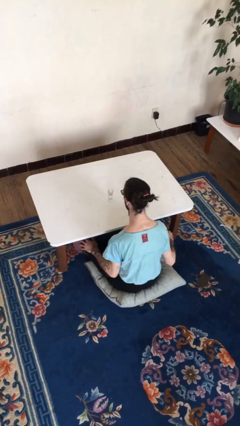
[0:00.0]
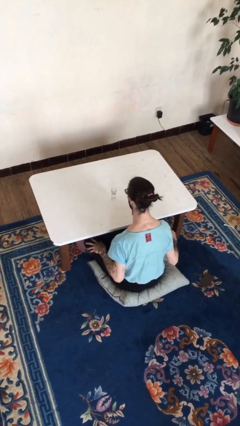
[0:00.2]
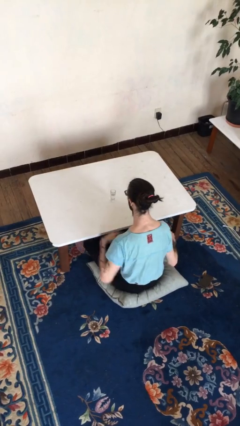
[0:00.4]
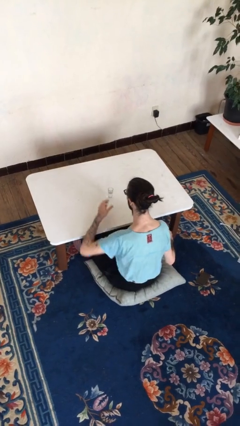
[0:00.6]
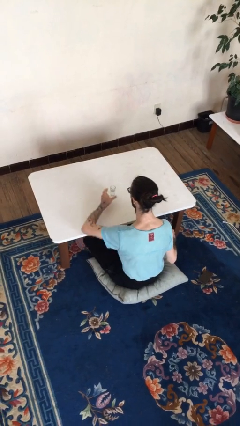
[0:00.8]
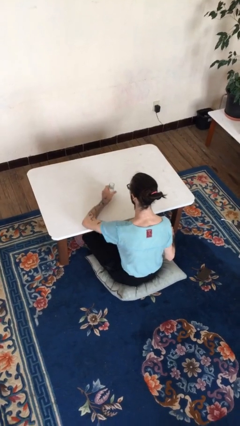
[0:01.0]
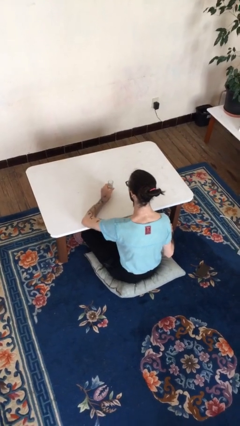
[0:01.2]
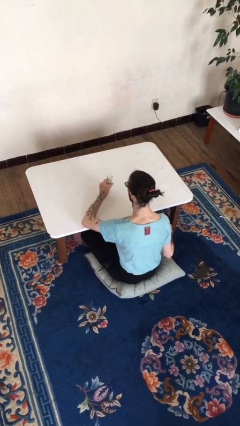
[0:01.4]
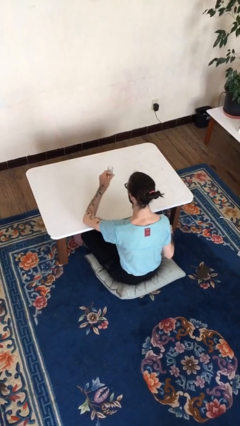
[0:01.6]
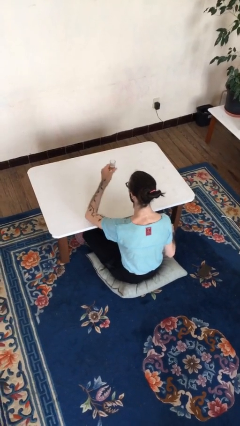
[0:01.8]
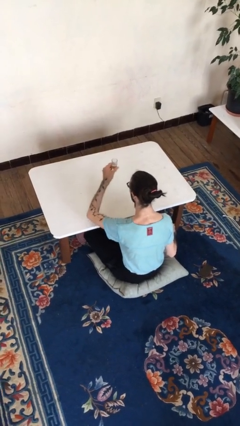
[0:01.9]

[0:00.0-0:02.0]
person picks up object from table

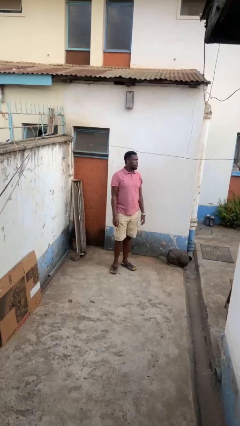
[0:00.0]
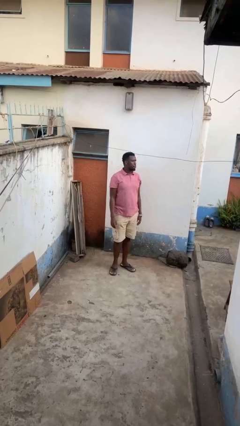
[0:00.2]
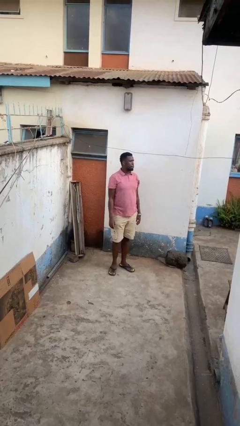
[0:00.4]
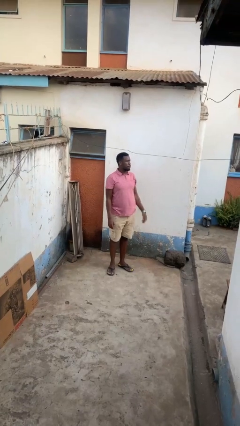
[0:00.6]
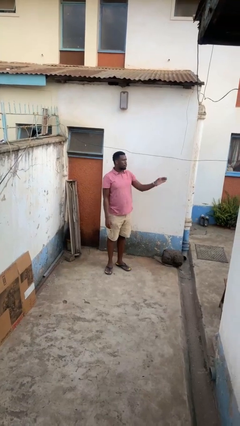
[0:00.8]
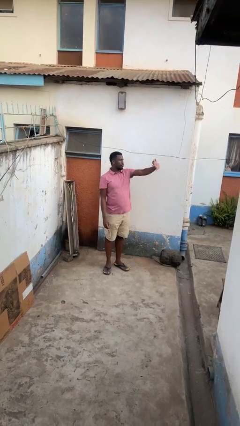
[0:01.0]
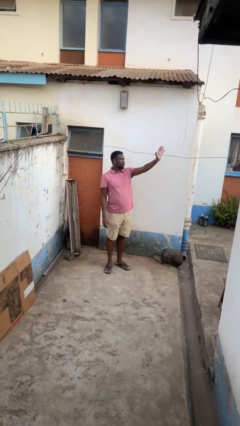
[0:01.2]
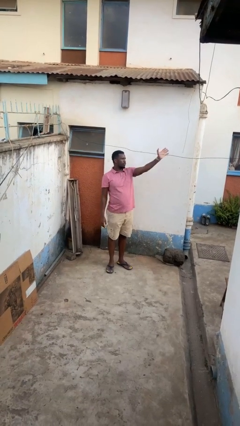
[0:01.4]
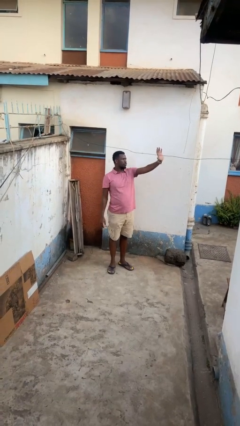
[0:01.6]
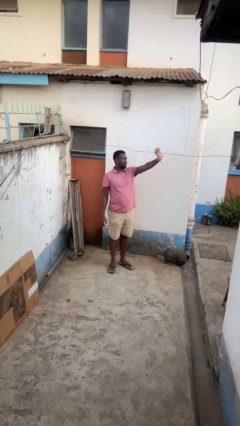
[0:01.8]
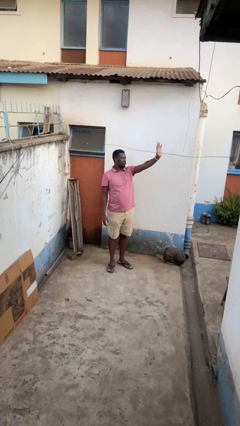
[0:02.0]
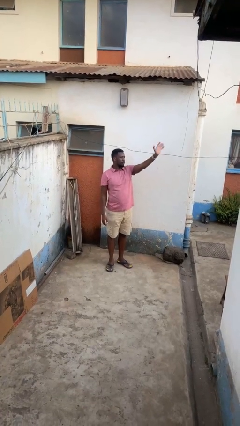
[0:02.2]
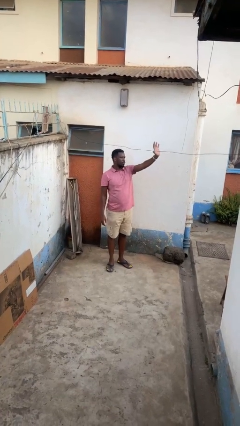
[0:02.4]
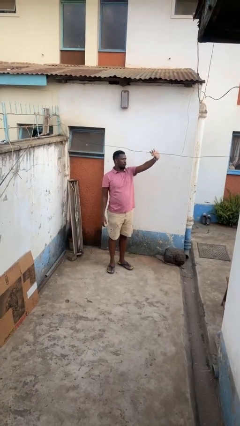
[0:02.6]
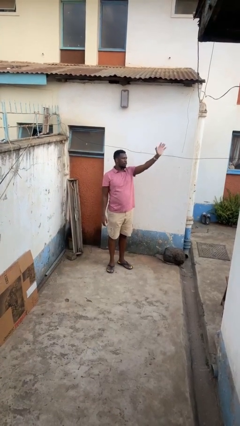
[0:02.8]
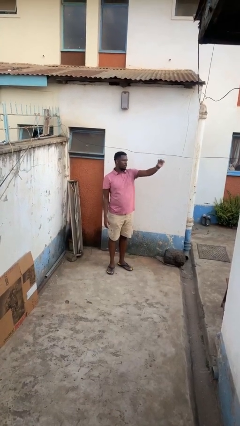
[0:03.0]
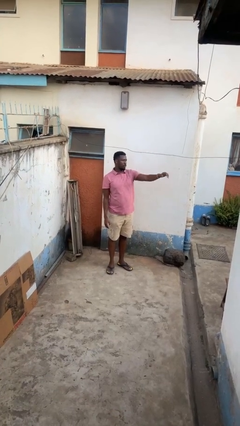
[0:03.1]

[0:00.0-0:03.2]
person waves at person

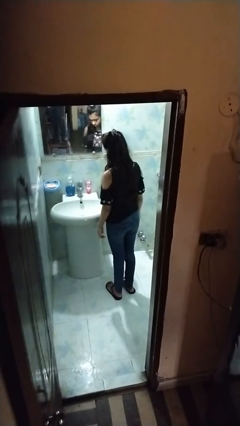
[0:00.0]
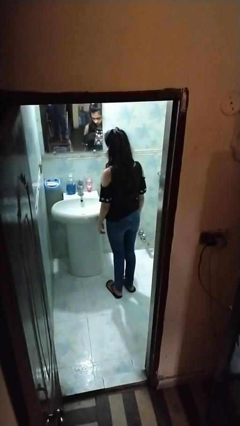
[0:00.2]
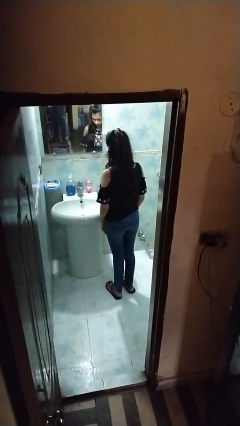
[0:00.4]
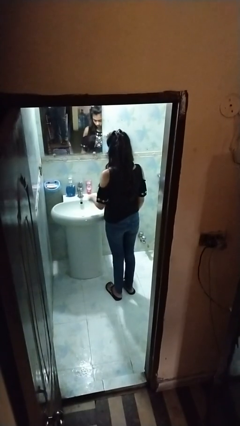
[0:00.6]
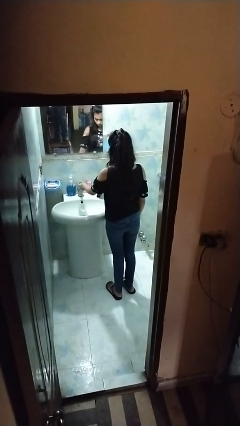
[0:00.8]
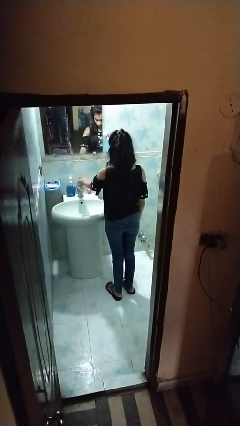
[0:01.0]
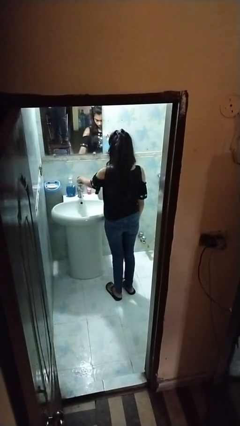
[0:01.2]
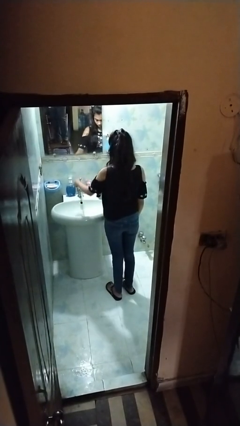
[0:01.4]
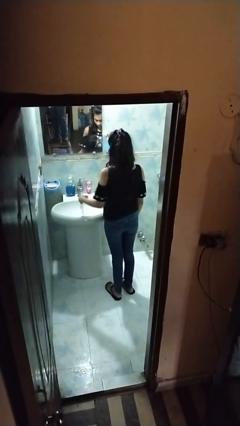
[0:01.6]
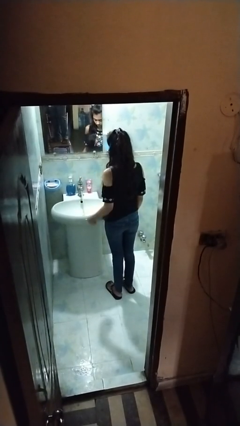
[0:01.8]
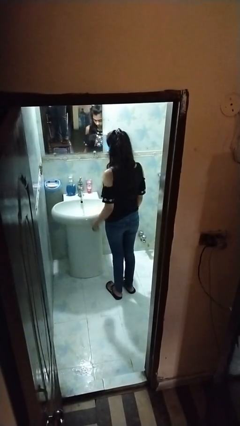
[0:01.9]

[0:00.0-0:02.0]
person turns on faucet

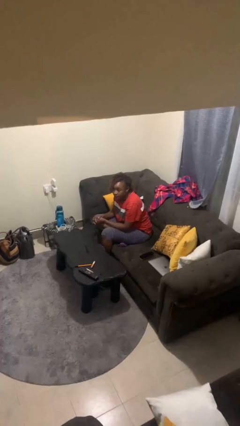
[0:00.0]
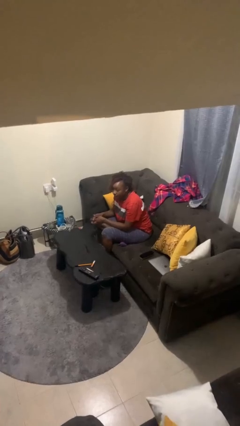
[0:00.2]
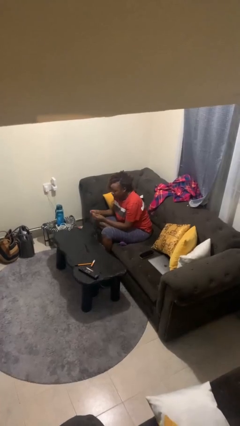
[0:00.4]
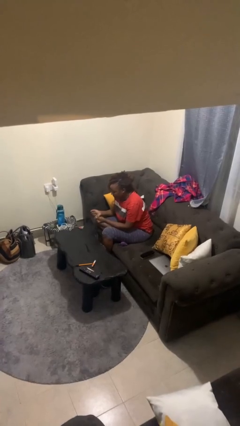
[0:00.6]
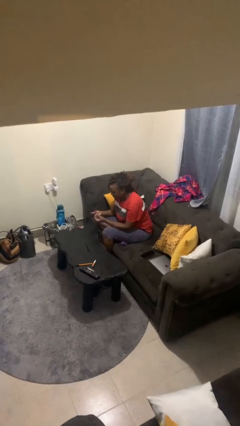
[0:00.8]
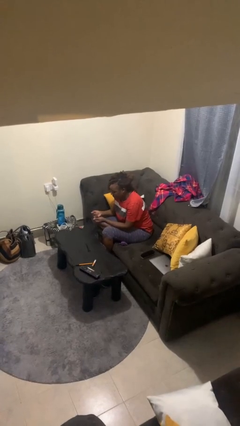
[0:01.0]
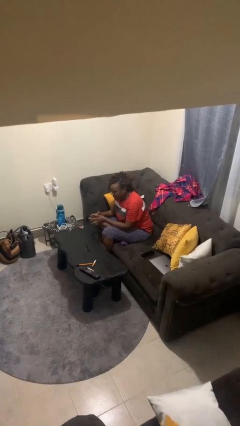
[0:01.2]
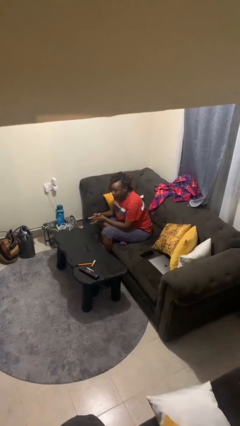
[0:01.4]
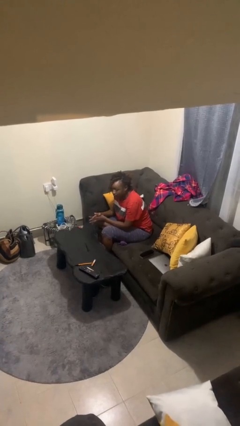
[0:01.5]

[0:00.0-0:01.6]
person snaps fingers

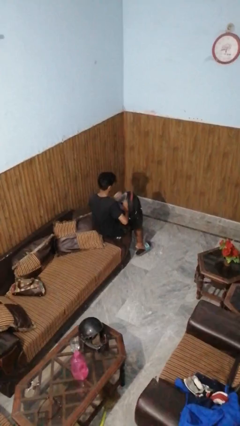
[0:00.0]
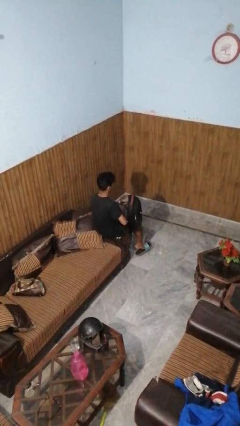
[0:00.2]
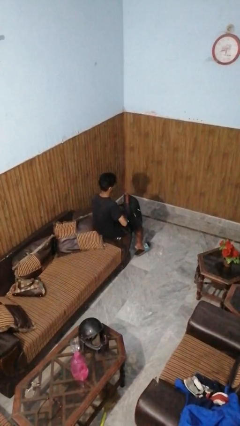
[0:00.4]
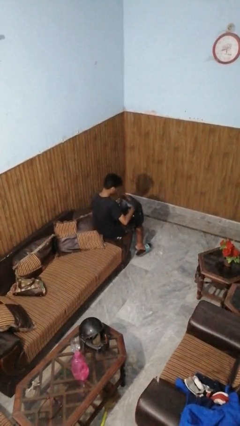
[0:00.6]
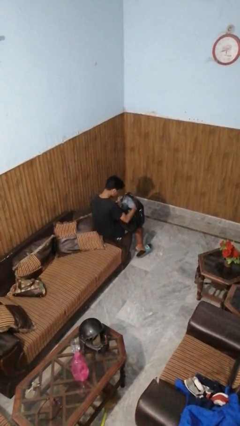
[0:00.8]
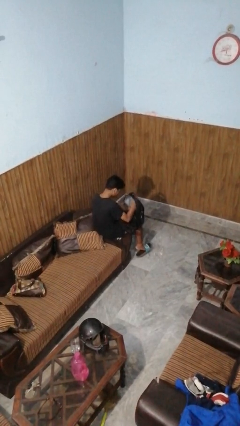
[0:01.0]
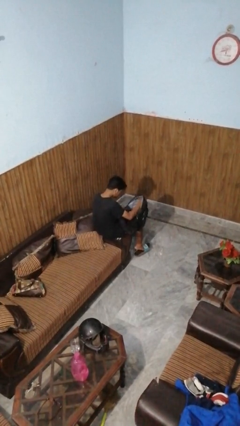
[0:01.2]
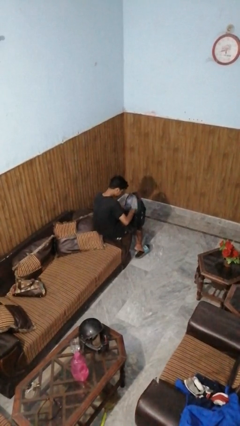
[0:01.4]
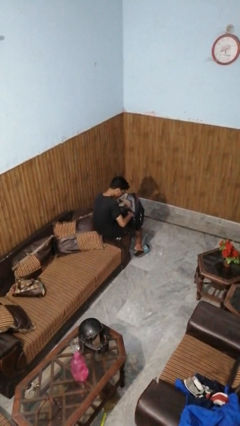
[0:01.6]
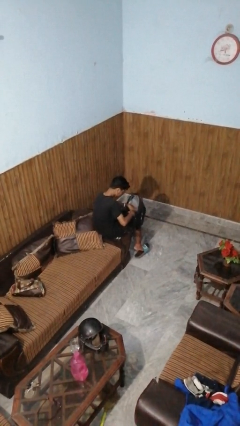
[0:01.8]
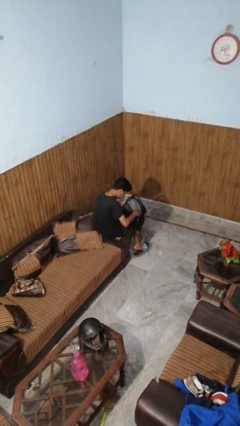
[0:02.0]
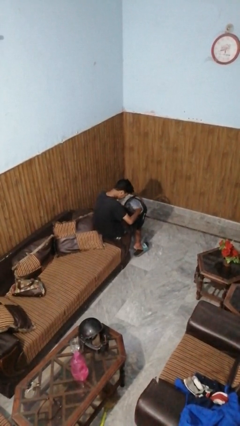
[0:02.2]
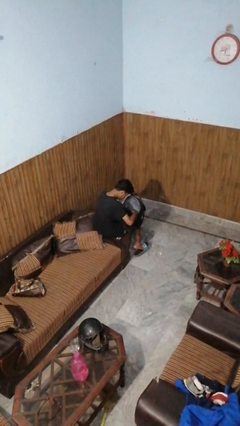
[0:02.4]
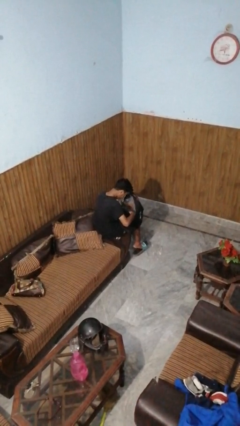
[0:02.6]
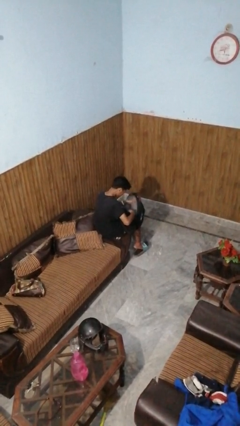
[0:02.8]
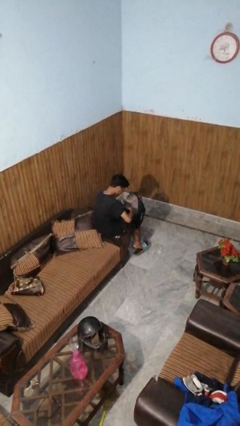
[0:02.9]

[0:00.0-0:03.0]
person searches in backpack

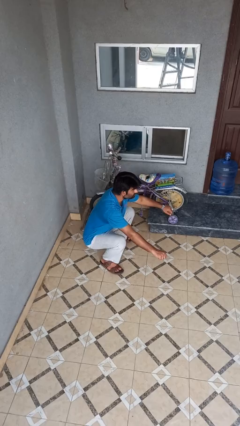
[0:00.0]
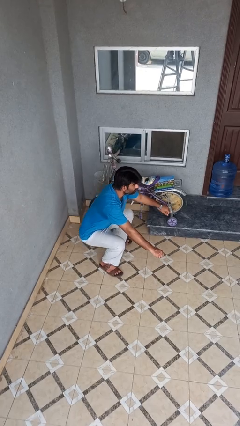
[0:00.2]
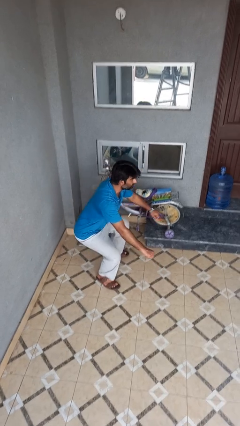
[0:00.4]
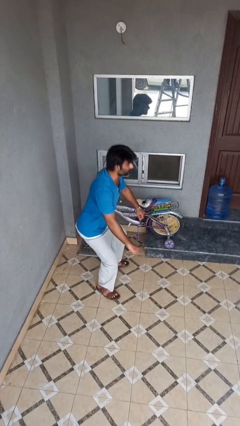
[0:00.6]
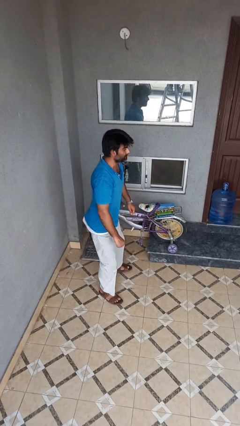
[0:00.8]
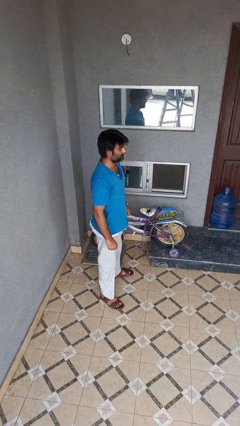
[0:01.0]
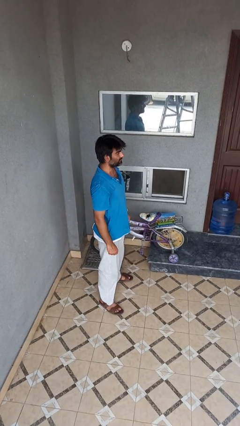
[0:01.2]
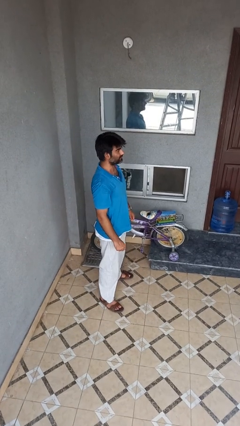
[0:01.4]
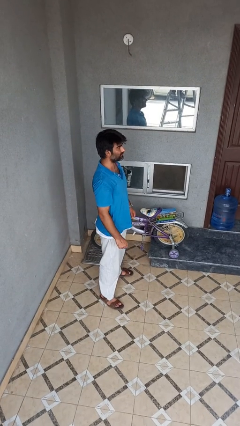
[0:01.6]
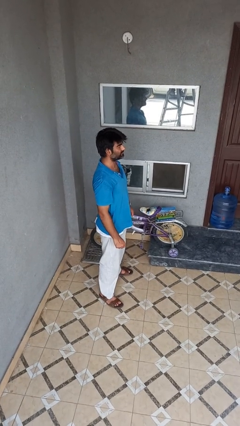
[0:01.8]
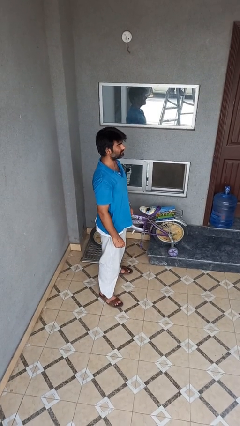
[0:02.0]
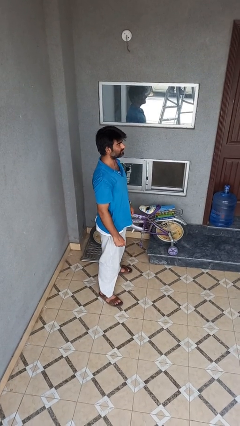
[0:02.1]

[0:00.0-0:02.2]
person stands up

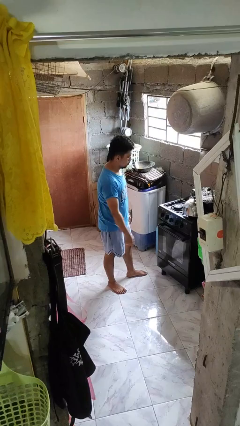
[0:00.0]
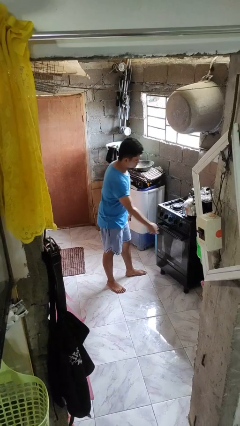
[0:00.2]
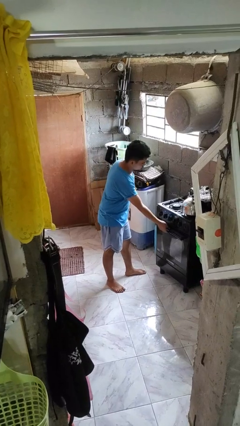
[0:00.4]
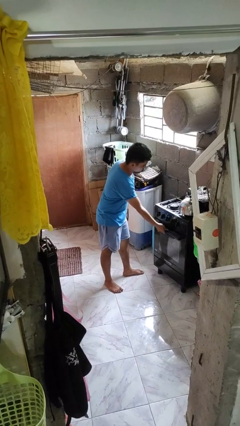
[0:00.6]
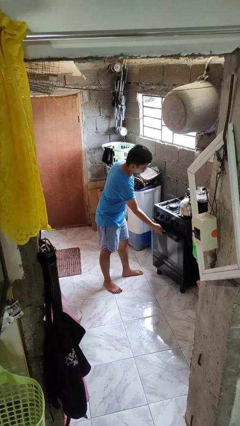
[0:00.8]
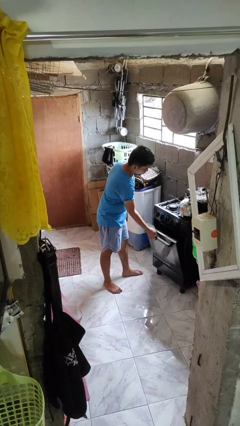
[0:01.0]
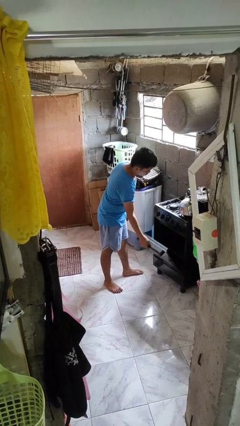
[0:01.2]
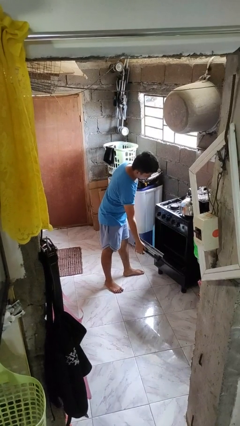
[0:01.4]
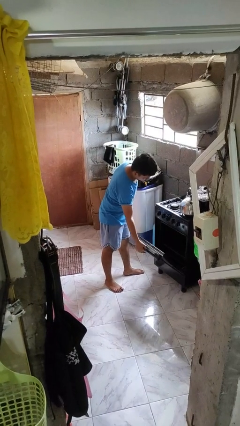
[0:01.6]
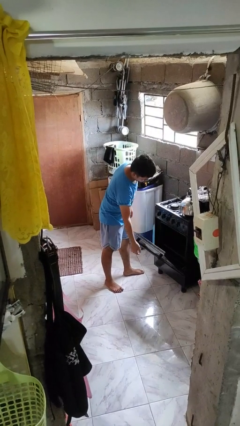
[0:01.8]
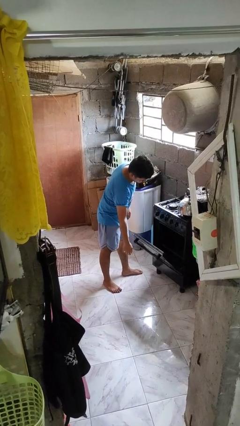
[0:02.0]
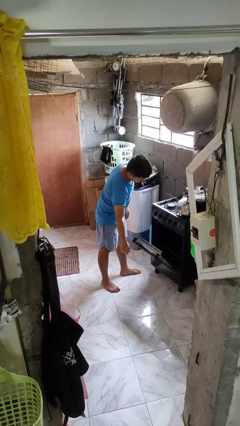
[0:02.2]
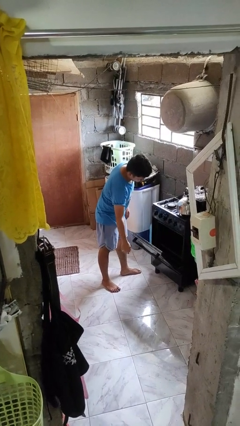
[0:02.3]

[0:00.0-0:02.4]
person opens oven door

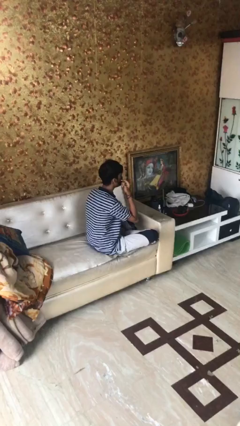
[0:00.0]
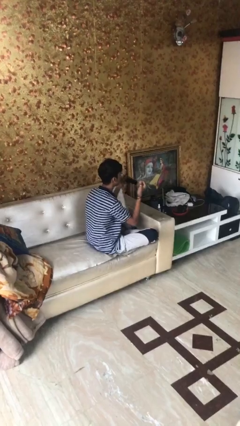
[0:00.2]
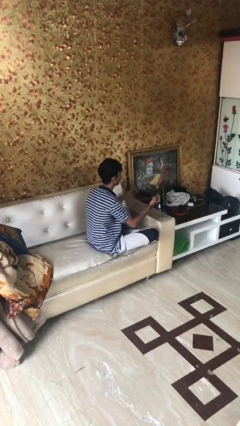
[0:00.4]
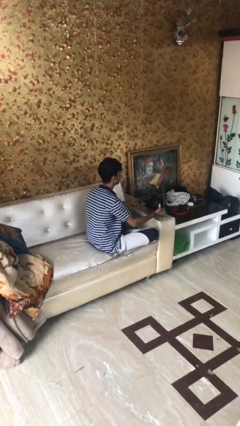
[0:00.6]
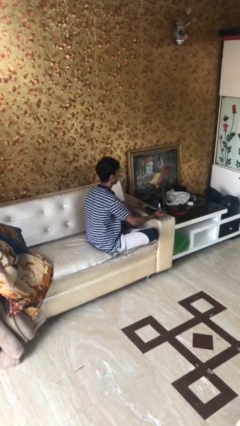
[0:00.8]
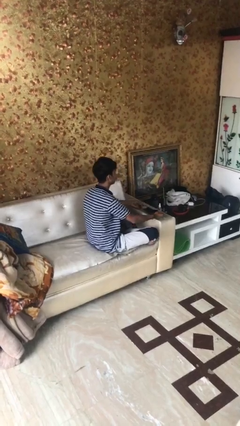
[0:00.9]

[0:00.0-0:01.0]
person takes off facemask
